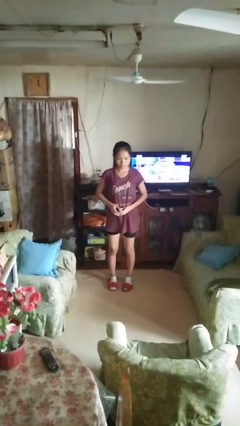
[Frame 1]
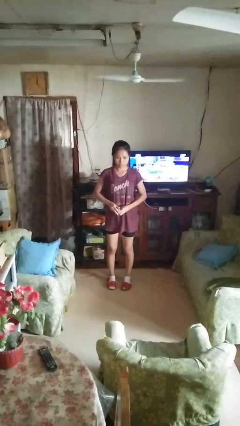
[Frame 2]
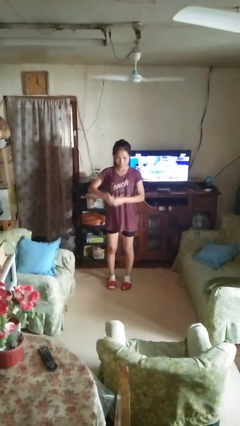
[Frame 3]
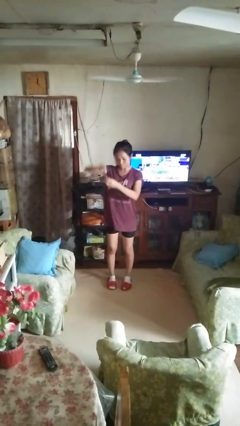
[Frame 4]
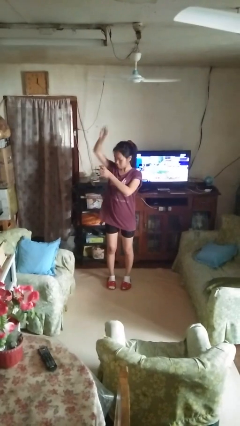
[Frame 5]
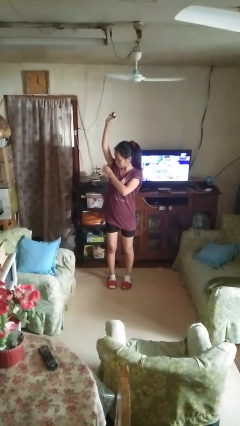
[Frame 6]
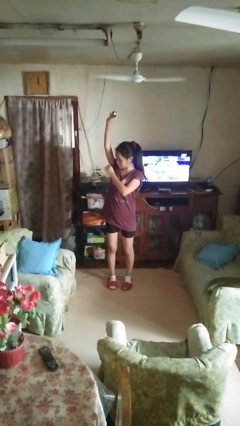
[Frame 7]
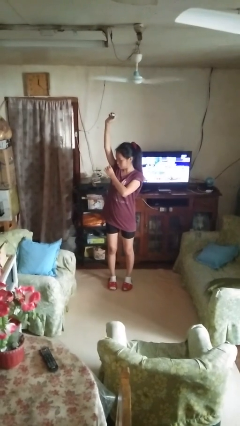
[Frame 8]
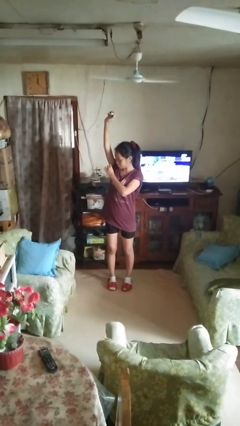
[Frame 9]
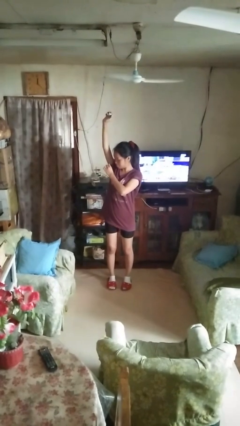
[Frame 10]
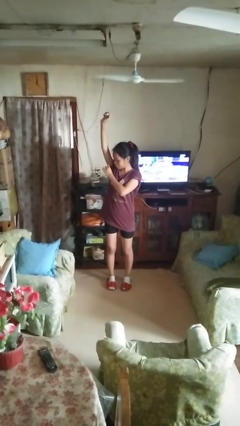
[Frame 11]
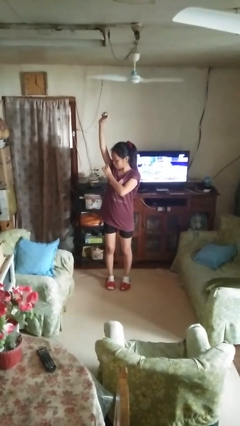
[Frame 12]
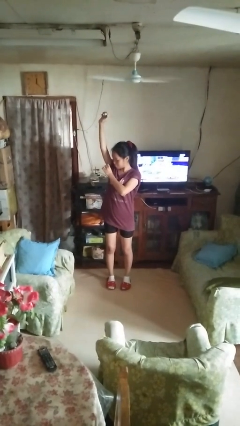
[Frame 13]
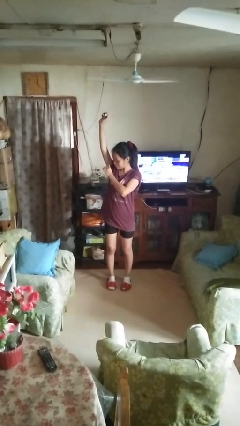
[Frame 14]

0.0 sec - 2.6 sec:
person applies deodorant

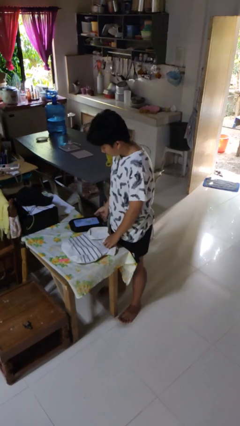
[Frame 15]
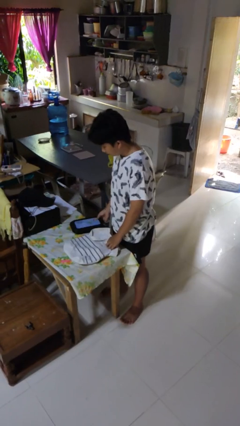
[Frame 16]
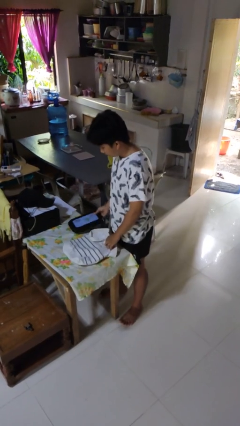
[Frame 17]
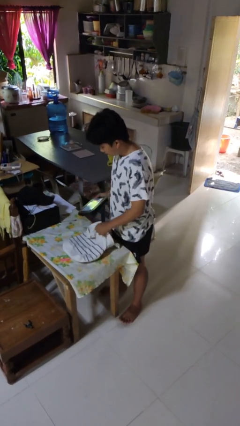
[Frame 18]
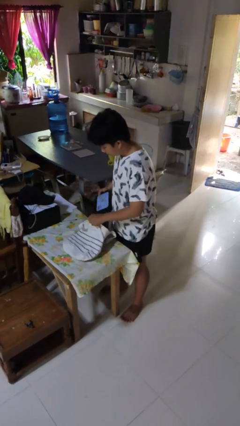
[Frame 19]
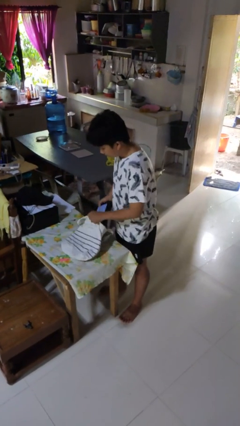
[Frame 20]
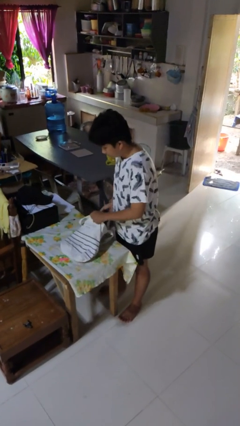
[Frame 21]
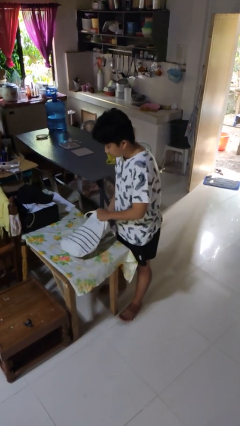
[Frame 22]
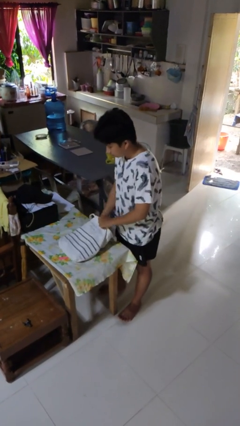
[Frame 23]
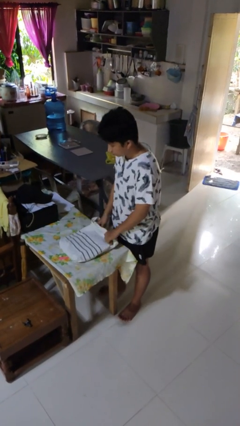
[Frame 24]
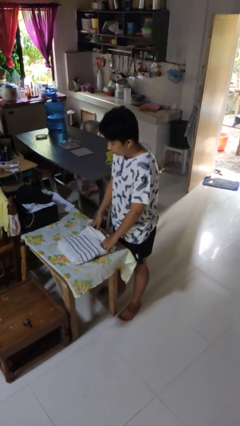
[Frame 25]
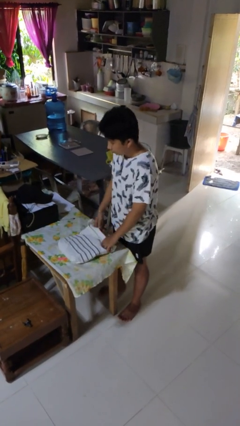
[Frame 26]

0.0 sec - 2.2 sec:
person puts object into bag

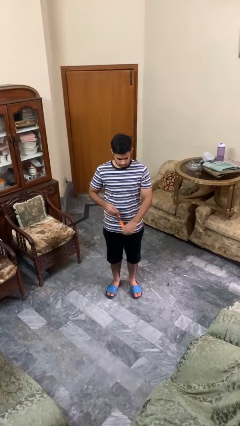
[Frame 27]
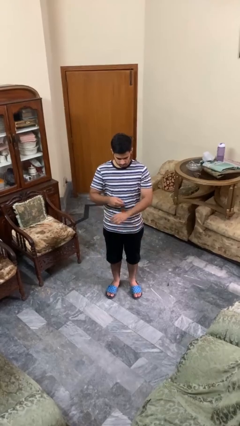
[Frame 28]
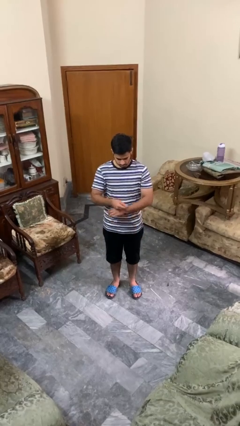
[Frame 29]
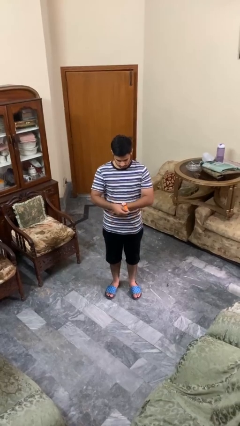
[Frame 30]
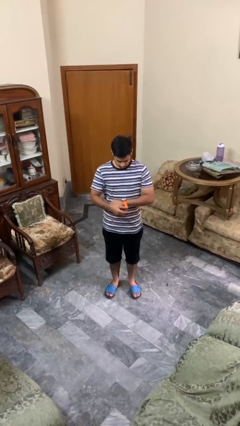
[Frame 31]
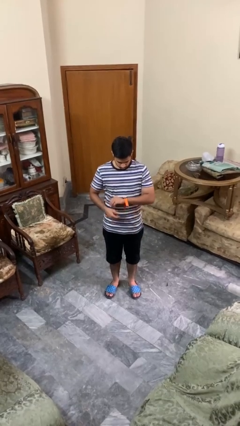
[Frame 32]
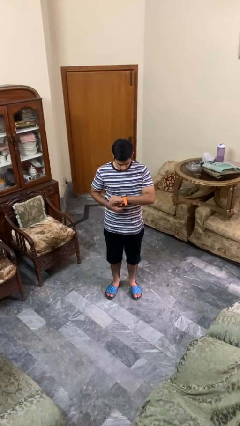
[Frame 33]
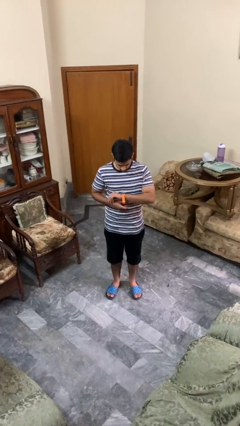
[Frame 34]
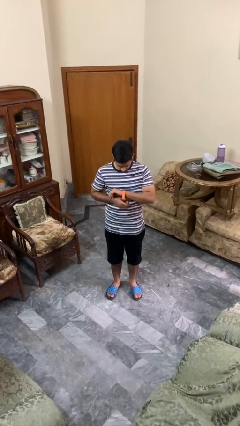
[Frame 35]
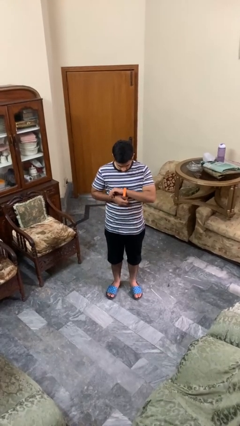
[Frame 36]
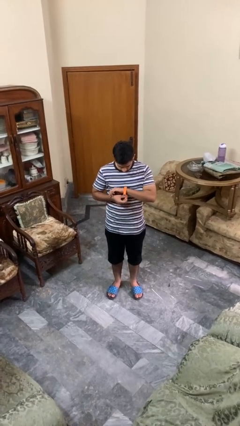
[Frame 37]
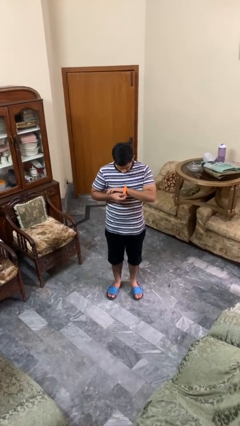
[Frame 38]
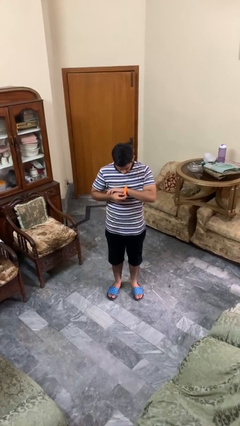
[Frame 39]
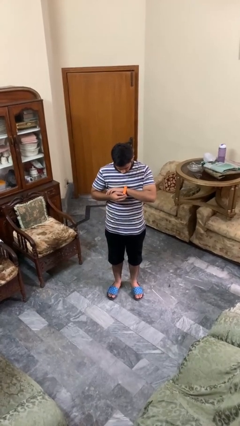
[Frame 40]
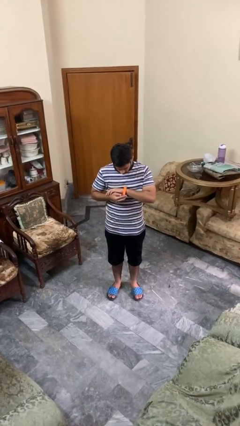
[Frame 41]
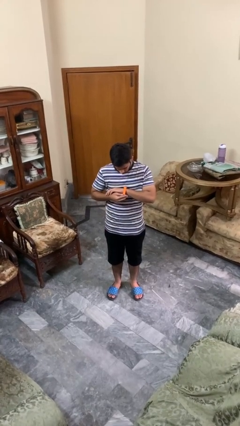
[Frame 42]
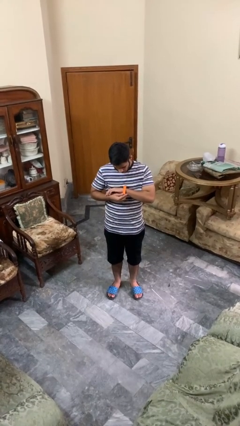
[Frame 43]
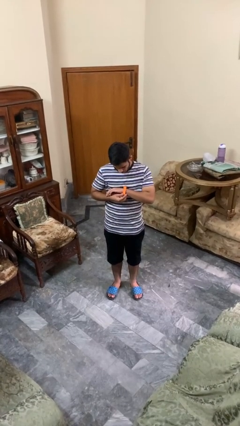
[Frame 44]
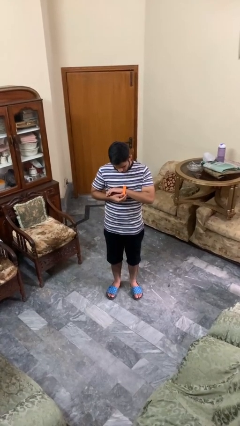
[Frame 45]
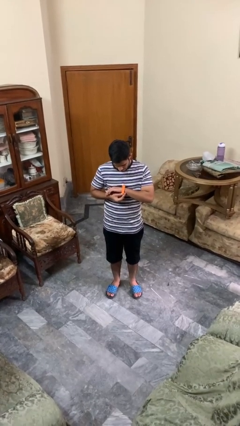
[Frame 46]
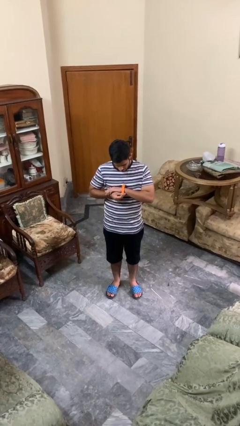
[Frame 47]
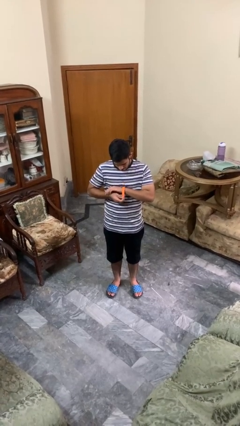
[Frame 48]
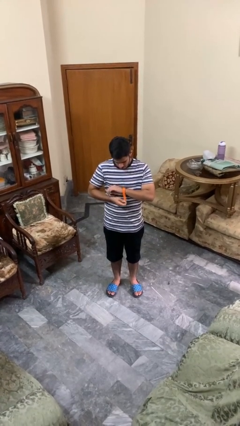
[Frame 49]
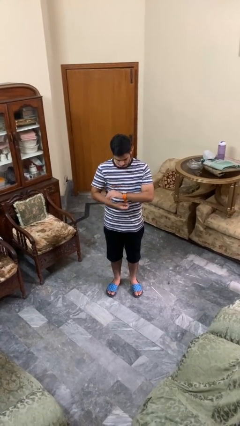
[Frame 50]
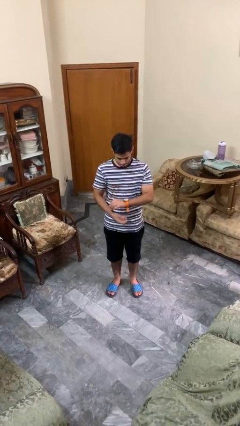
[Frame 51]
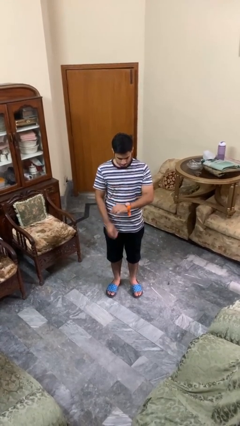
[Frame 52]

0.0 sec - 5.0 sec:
person puts on wristwatch

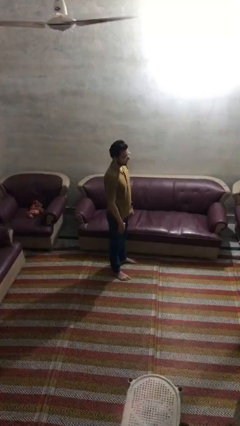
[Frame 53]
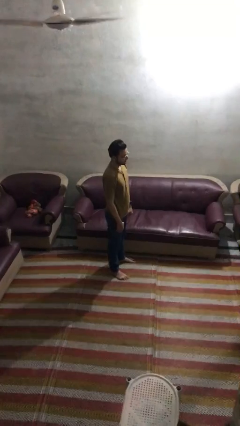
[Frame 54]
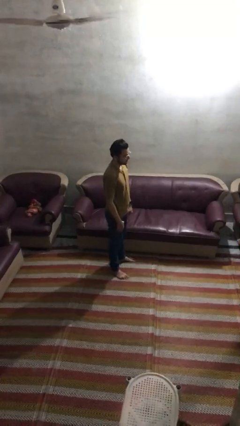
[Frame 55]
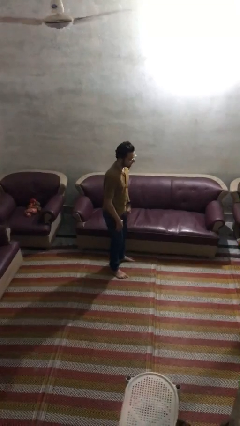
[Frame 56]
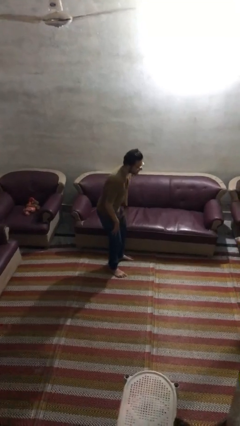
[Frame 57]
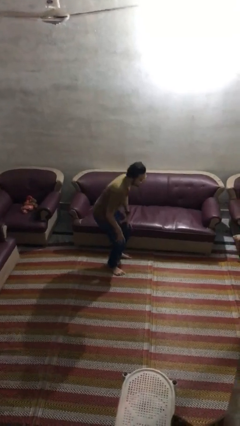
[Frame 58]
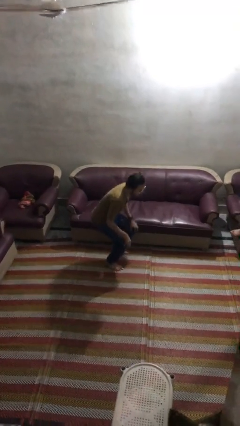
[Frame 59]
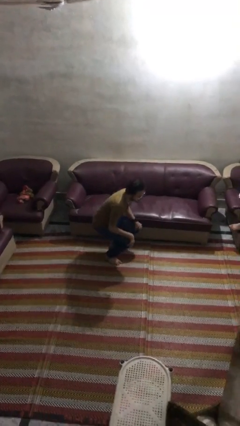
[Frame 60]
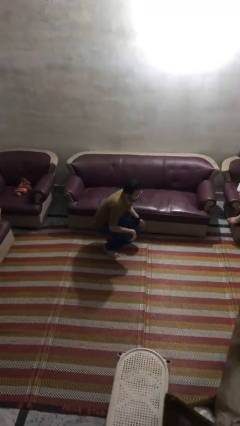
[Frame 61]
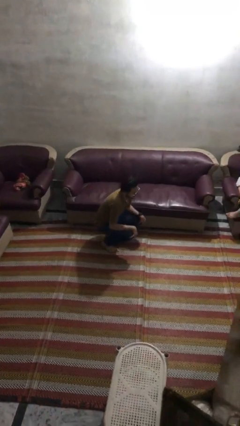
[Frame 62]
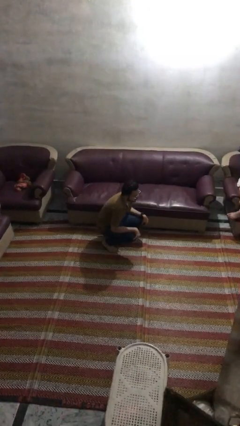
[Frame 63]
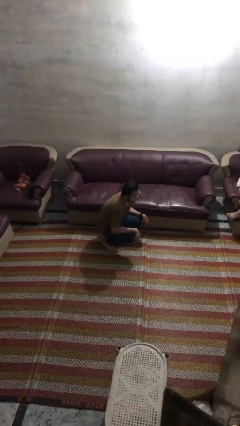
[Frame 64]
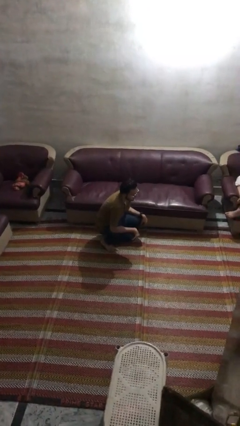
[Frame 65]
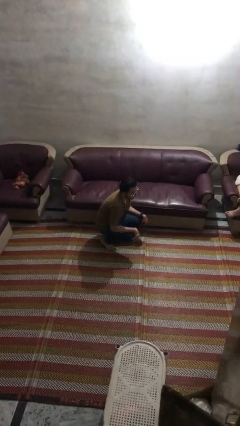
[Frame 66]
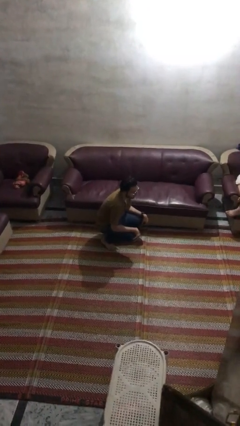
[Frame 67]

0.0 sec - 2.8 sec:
person squats

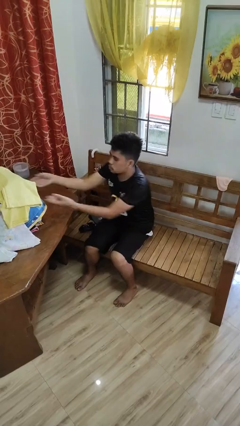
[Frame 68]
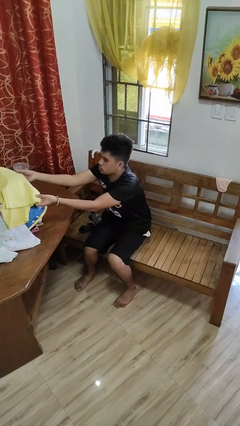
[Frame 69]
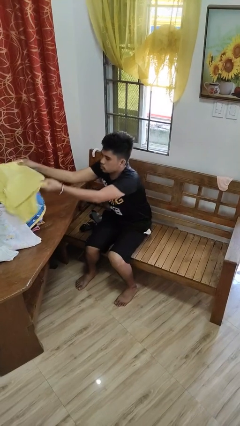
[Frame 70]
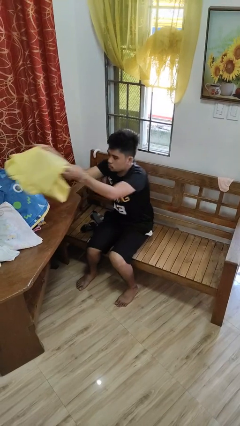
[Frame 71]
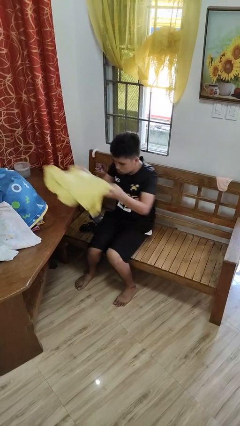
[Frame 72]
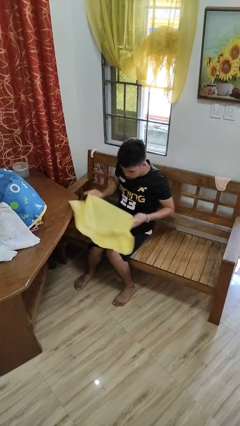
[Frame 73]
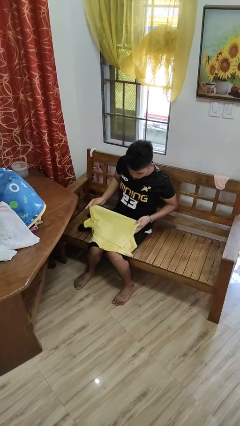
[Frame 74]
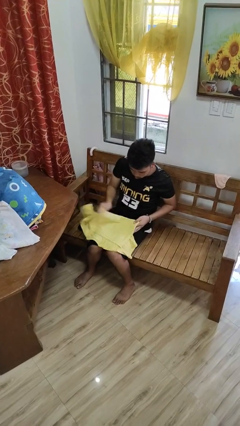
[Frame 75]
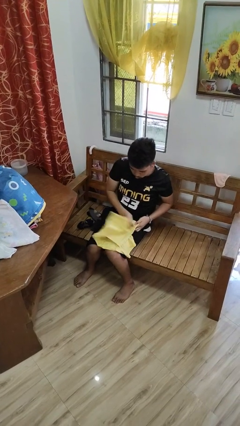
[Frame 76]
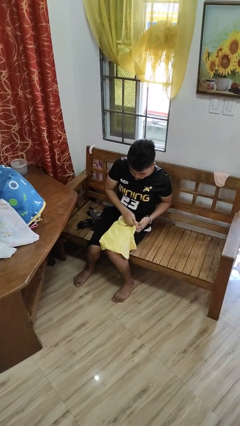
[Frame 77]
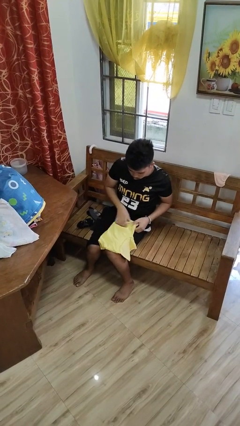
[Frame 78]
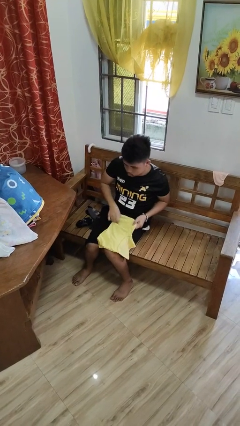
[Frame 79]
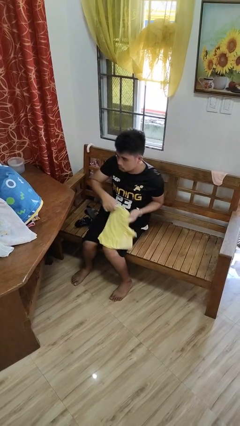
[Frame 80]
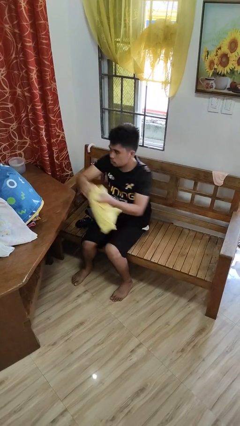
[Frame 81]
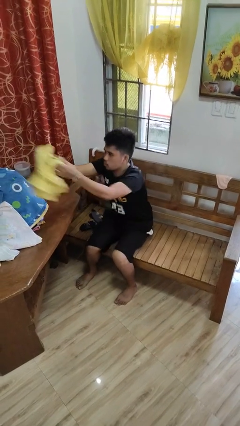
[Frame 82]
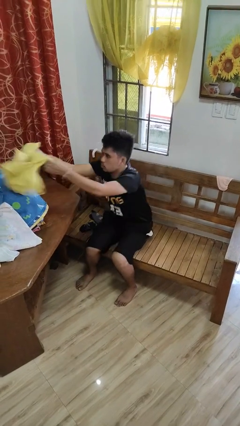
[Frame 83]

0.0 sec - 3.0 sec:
person folds shirt

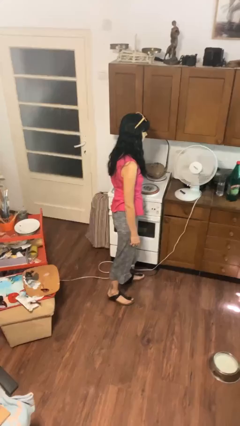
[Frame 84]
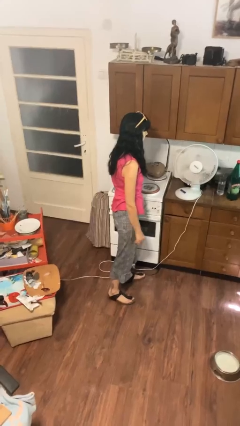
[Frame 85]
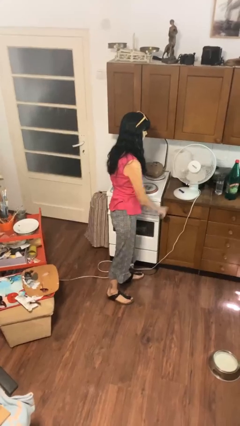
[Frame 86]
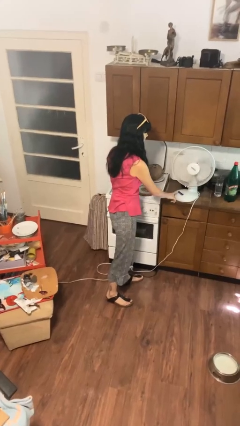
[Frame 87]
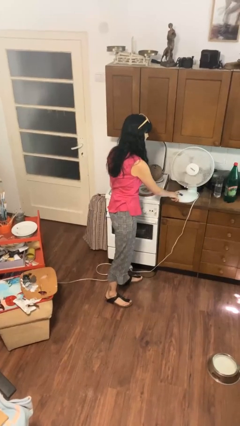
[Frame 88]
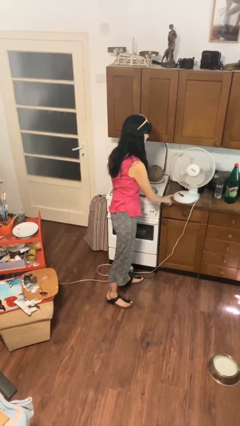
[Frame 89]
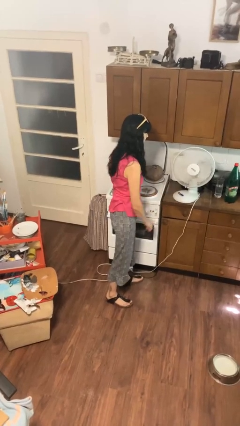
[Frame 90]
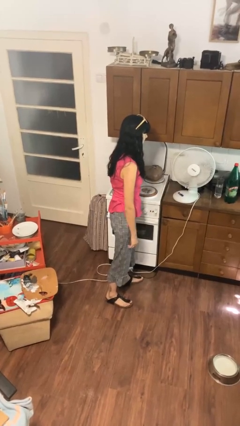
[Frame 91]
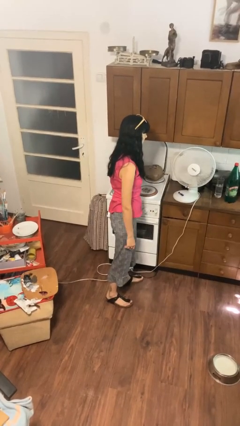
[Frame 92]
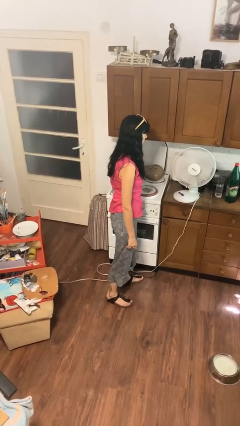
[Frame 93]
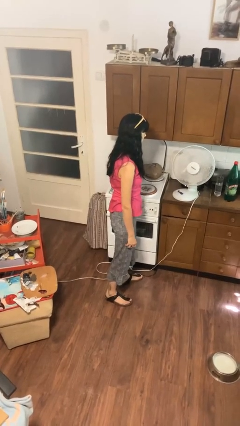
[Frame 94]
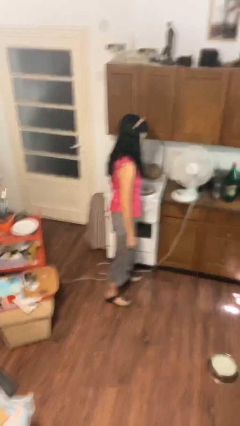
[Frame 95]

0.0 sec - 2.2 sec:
person turns on fan
